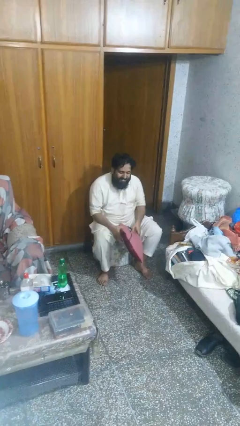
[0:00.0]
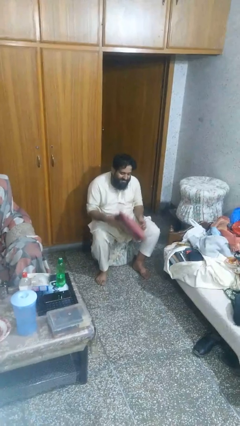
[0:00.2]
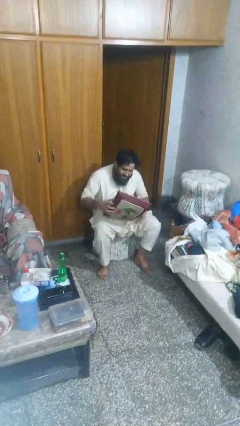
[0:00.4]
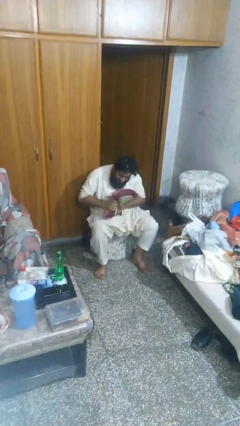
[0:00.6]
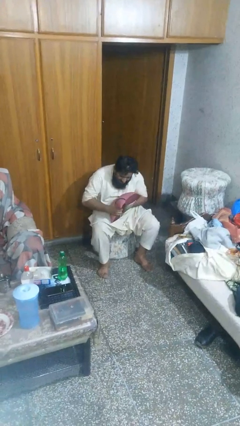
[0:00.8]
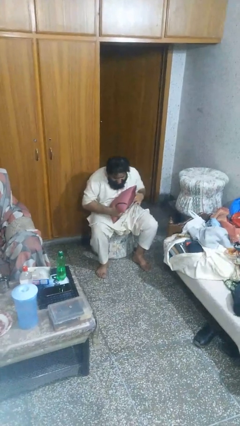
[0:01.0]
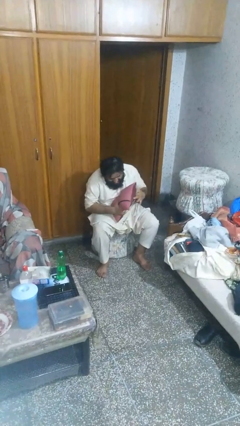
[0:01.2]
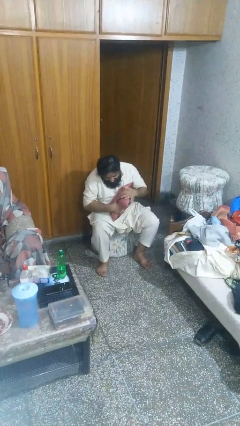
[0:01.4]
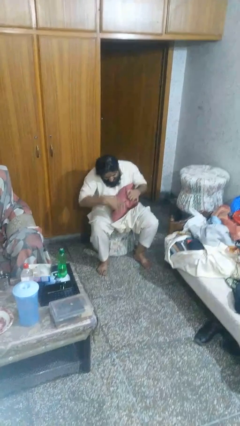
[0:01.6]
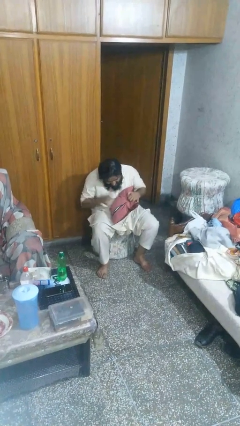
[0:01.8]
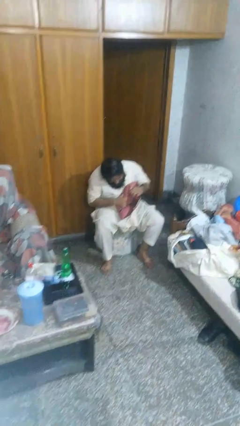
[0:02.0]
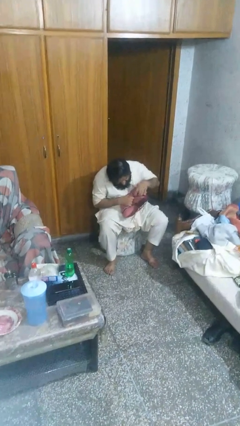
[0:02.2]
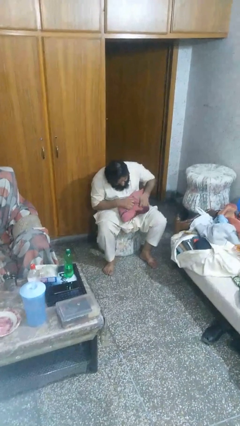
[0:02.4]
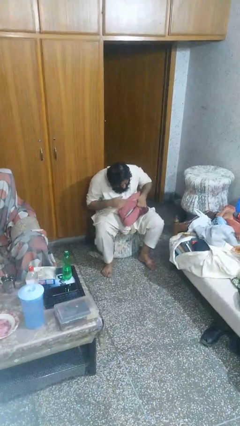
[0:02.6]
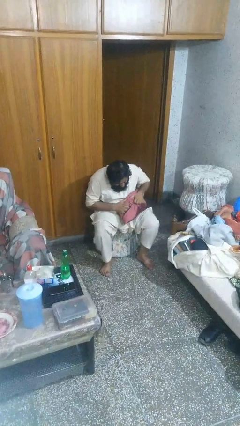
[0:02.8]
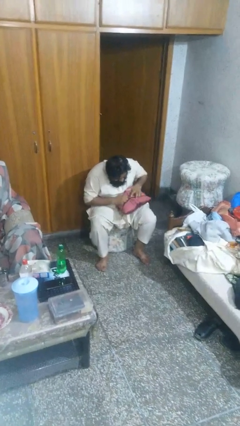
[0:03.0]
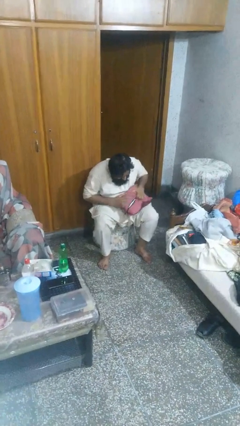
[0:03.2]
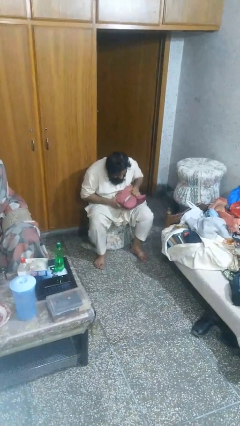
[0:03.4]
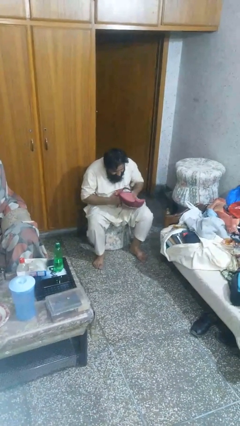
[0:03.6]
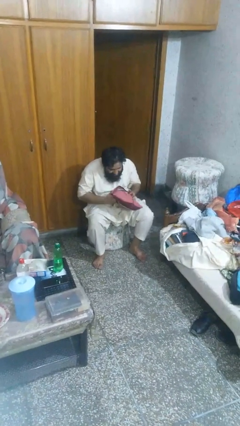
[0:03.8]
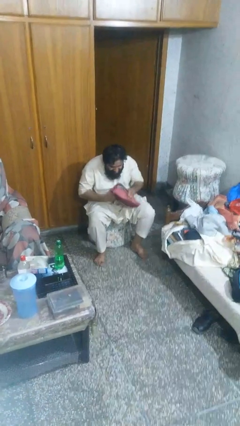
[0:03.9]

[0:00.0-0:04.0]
person squeezes object

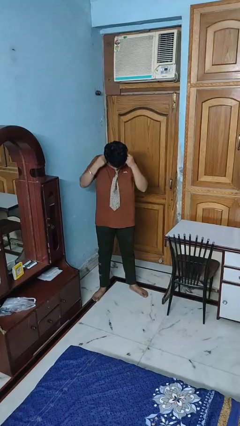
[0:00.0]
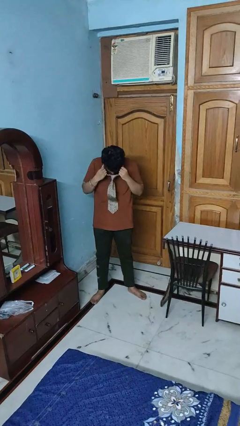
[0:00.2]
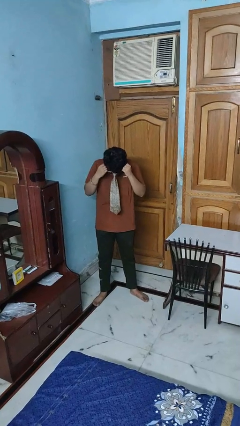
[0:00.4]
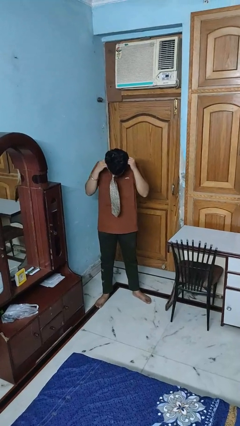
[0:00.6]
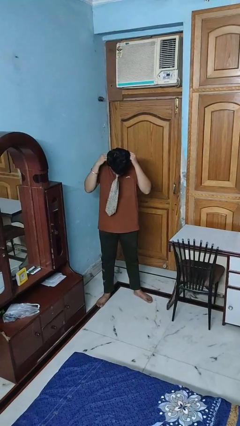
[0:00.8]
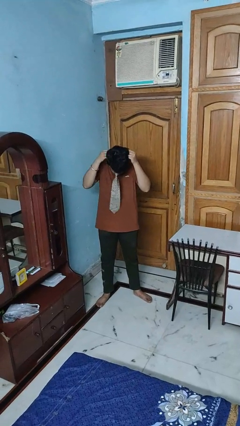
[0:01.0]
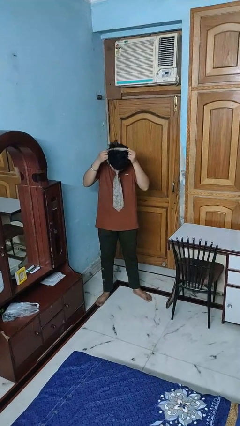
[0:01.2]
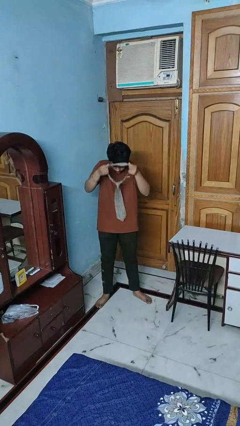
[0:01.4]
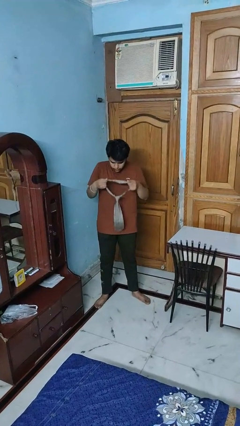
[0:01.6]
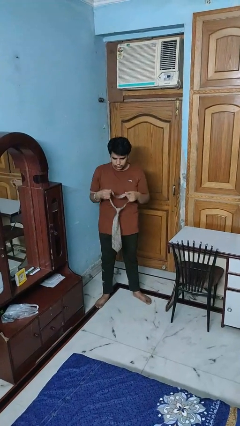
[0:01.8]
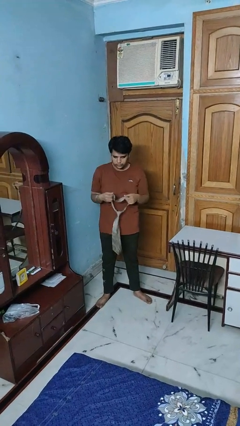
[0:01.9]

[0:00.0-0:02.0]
person takes off necktie

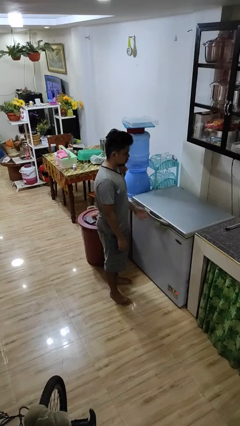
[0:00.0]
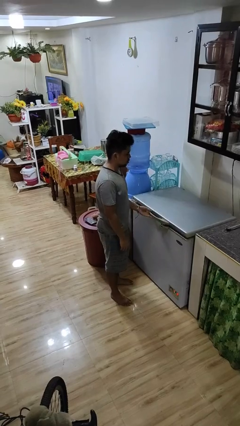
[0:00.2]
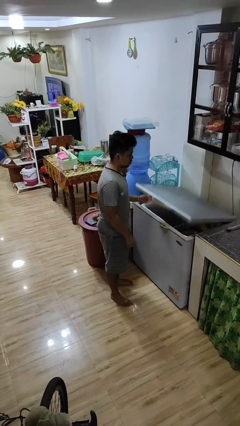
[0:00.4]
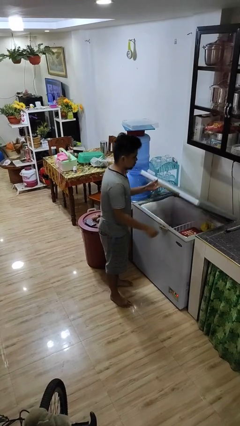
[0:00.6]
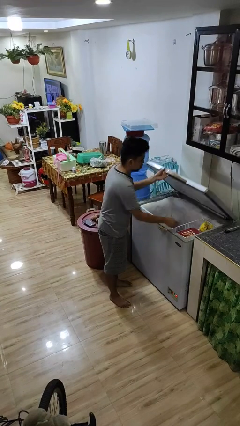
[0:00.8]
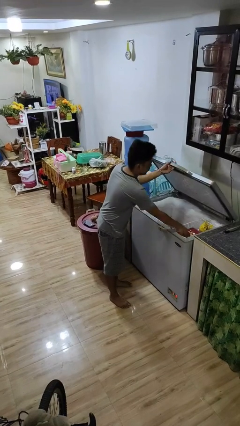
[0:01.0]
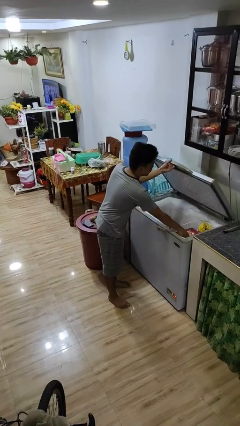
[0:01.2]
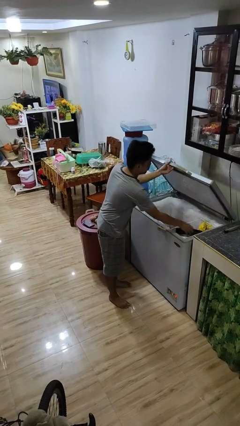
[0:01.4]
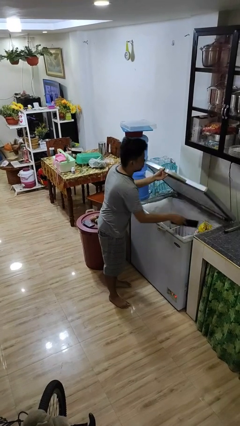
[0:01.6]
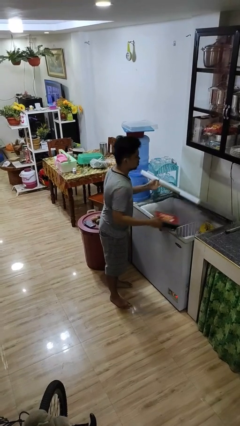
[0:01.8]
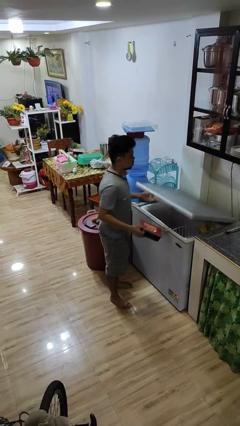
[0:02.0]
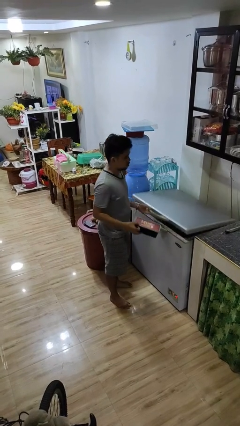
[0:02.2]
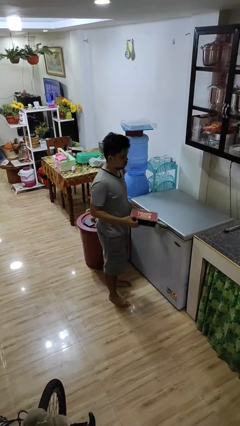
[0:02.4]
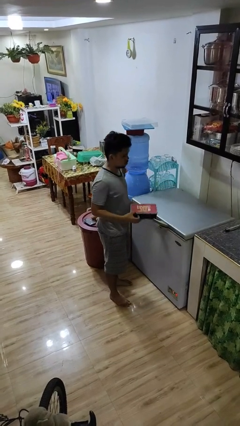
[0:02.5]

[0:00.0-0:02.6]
person takes object from refrigerator

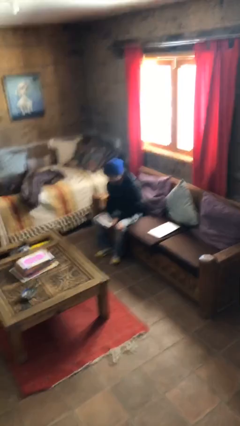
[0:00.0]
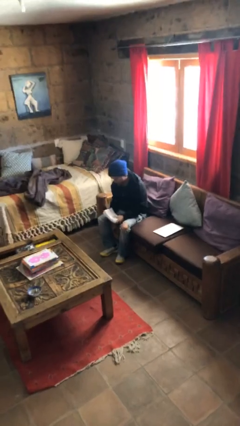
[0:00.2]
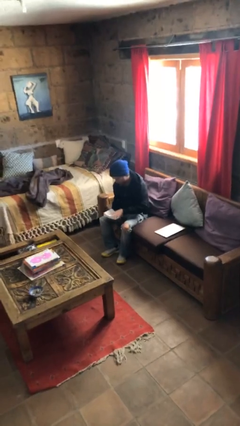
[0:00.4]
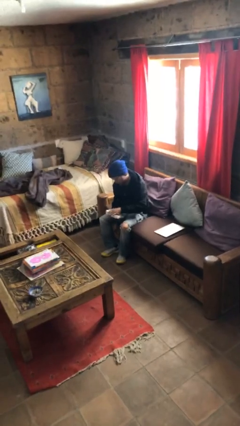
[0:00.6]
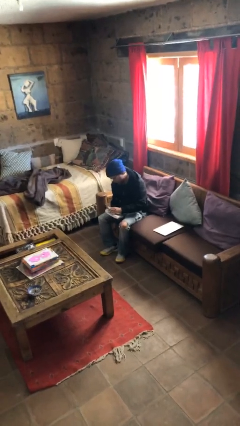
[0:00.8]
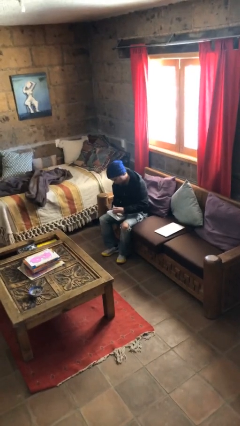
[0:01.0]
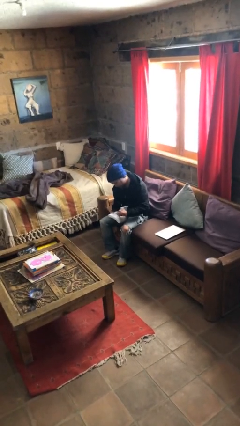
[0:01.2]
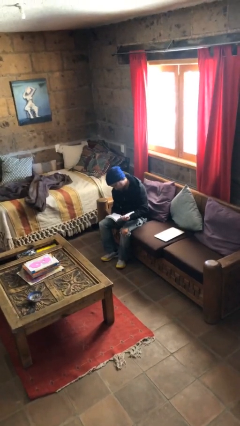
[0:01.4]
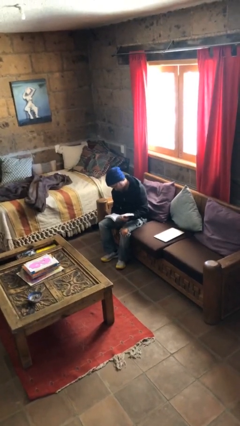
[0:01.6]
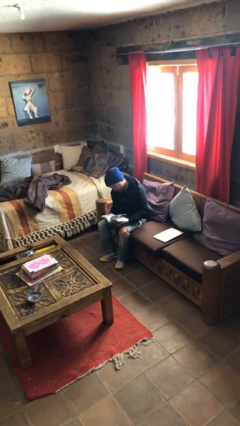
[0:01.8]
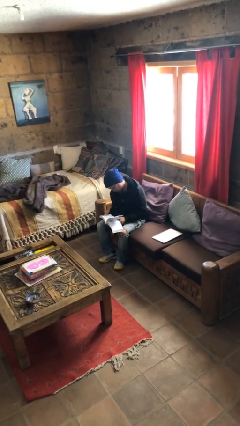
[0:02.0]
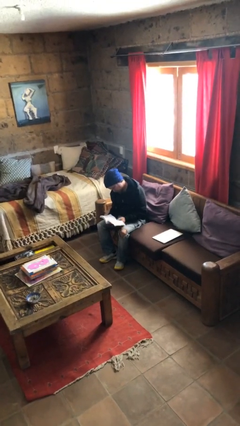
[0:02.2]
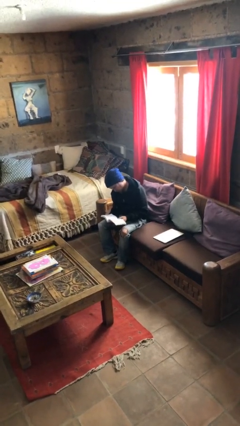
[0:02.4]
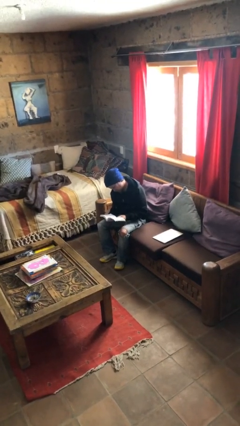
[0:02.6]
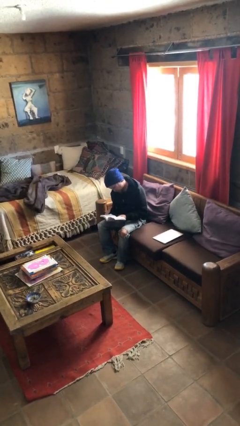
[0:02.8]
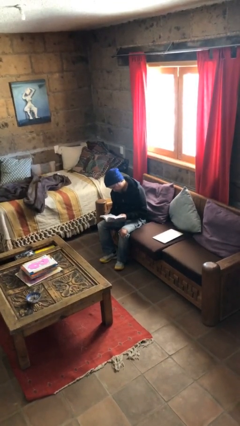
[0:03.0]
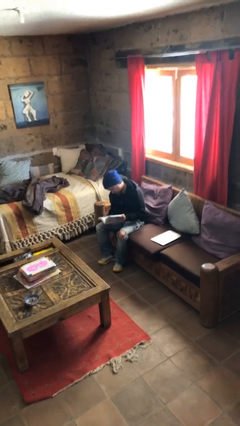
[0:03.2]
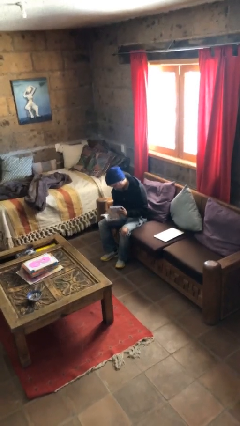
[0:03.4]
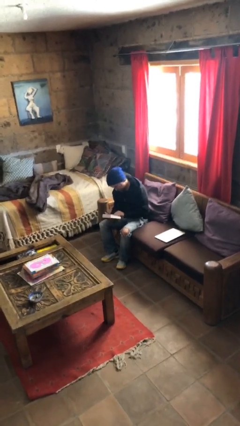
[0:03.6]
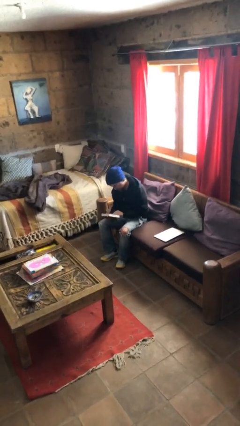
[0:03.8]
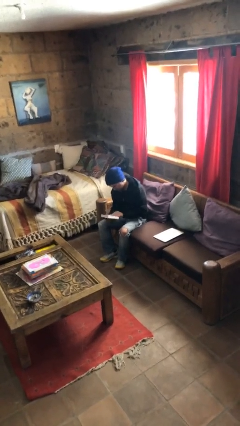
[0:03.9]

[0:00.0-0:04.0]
person reads document

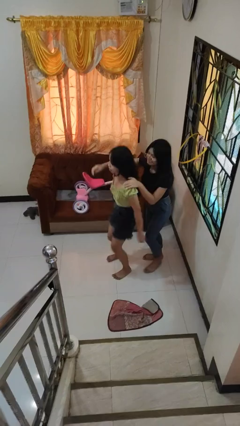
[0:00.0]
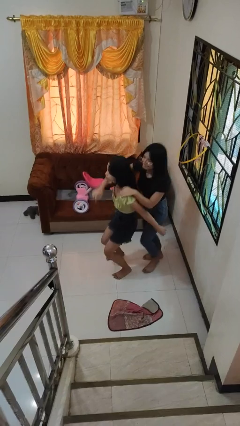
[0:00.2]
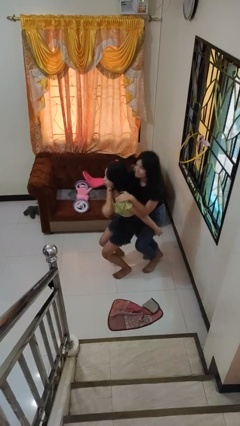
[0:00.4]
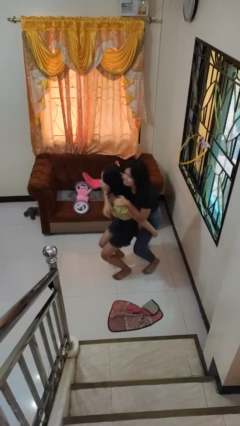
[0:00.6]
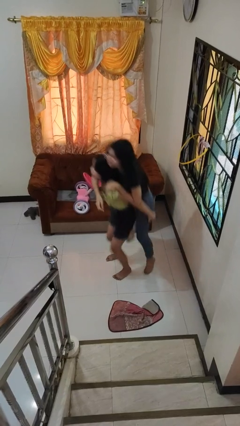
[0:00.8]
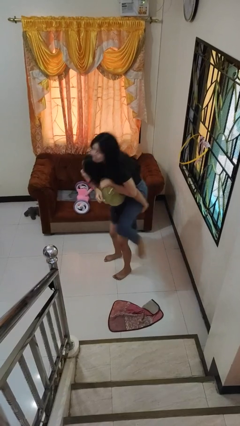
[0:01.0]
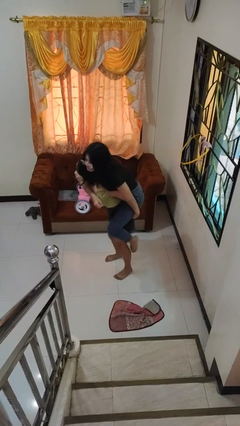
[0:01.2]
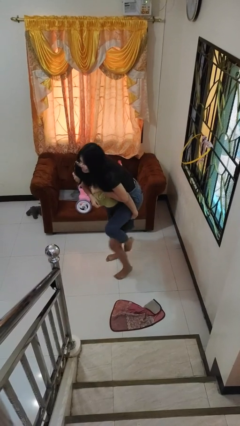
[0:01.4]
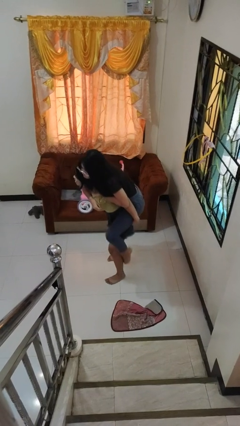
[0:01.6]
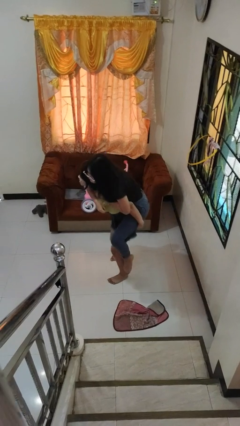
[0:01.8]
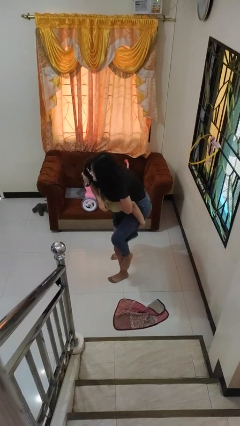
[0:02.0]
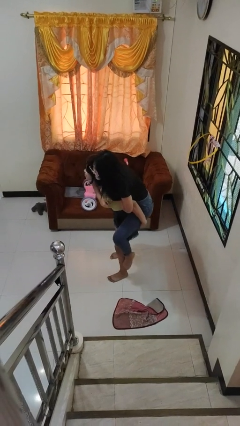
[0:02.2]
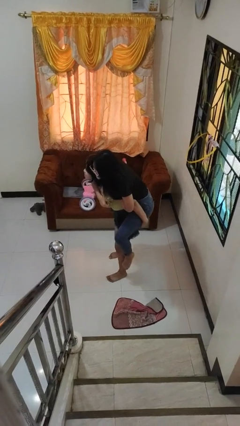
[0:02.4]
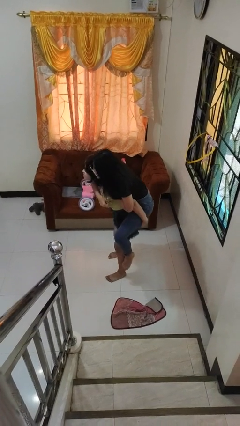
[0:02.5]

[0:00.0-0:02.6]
person carries person over shoulder

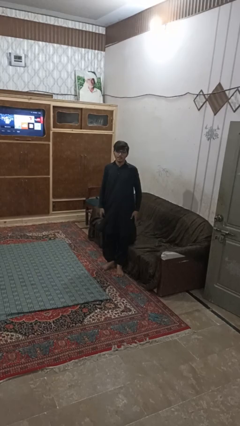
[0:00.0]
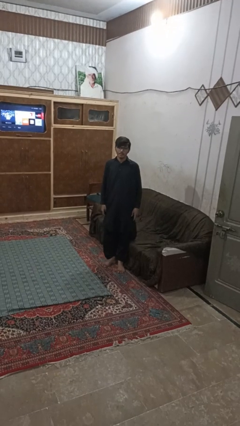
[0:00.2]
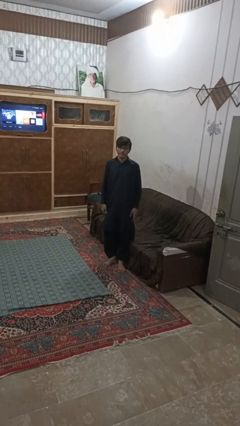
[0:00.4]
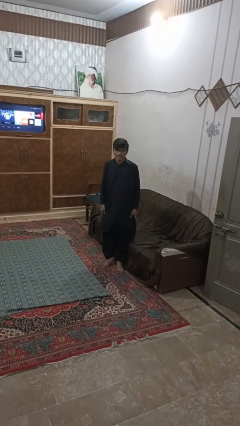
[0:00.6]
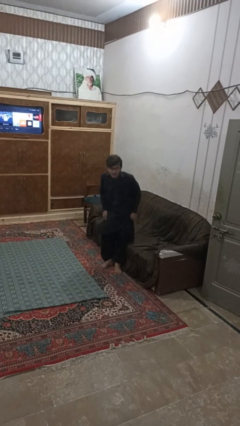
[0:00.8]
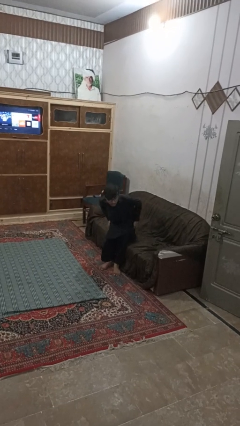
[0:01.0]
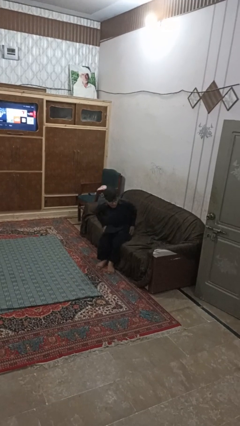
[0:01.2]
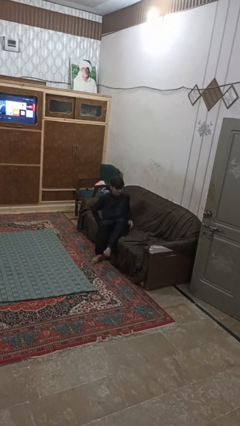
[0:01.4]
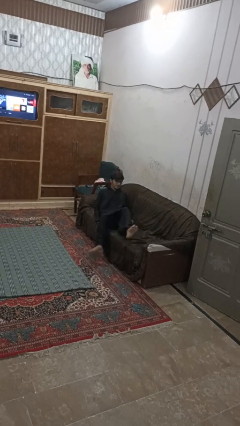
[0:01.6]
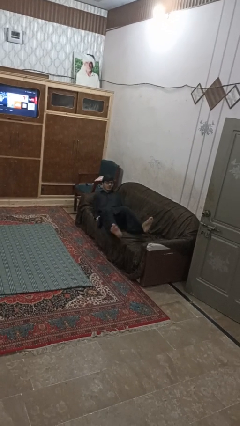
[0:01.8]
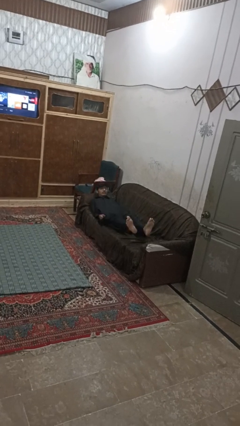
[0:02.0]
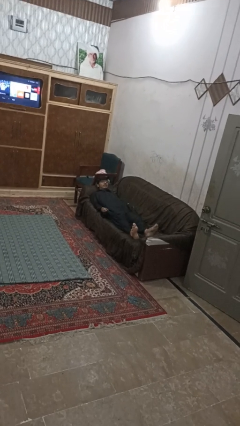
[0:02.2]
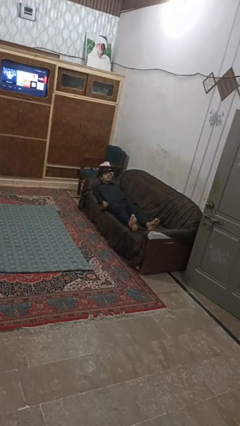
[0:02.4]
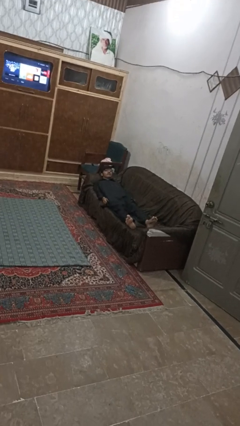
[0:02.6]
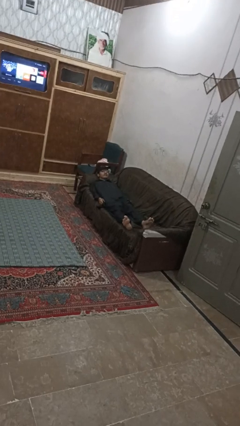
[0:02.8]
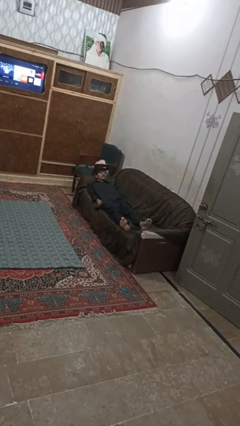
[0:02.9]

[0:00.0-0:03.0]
person lies down on couch
